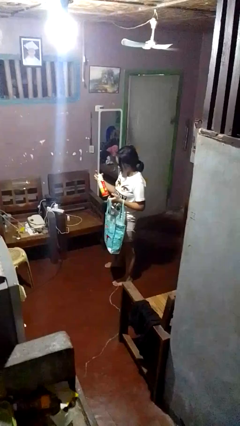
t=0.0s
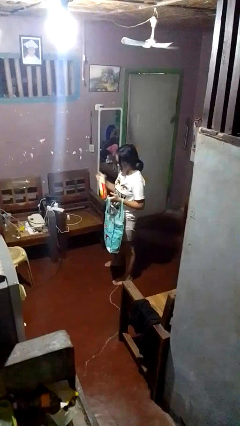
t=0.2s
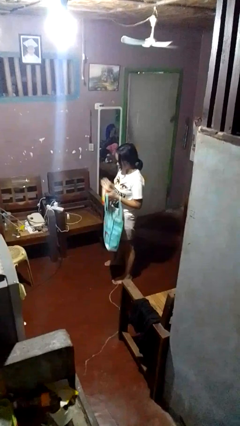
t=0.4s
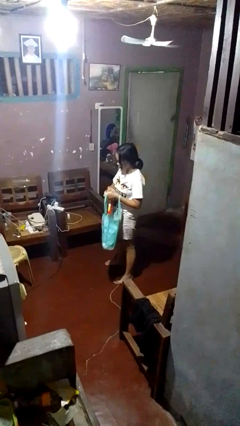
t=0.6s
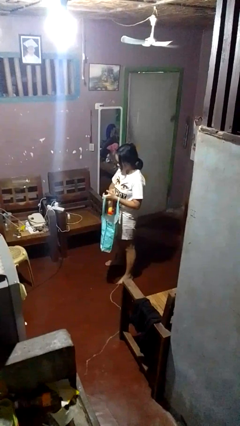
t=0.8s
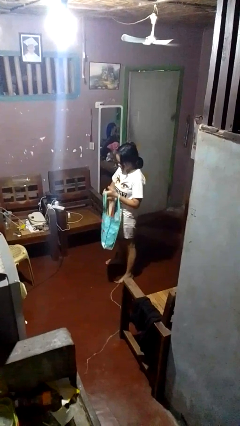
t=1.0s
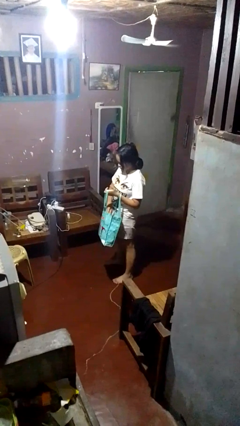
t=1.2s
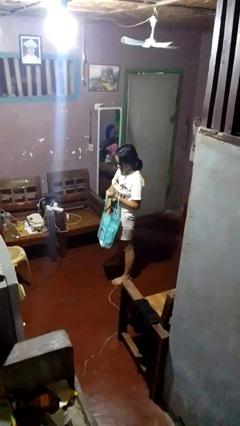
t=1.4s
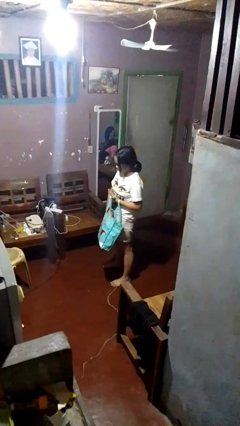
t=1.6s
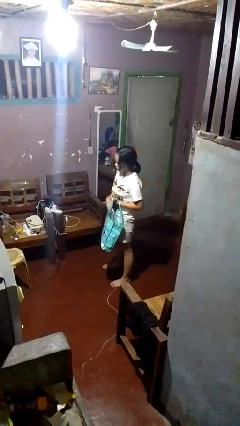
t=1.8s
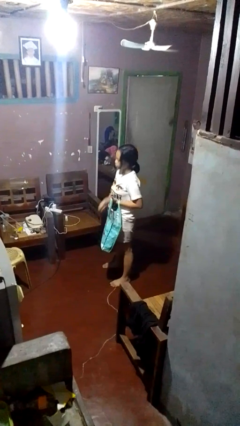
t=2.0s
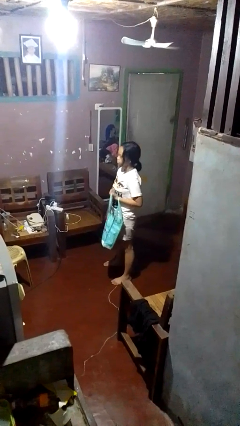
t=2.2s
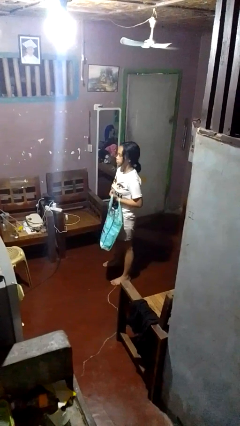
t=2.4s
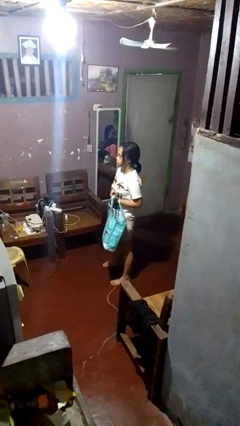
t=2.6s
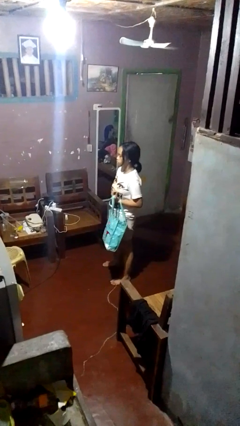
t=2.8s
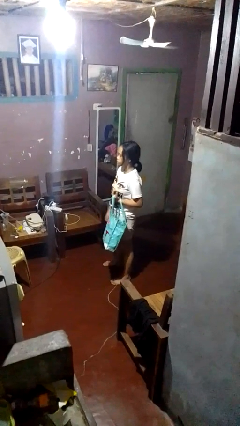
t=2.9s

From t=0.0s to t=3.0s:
person puts object into bag

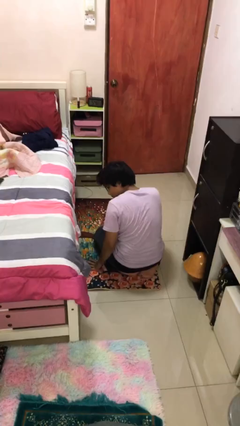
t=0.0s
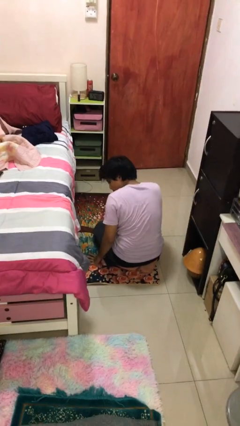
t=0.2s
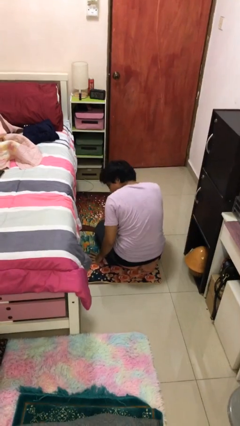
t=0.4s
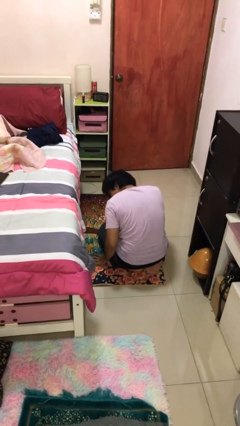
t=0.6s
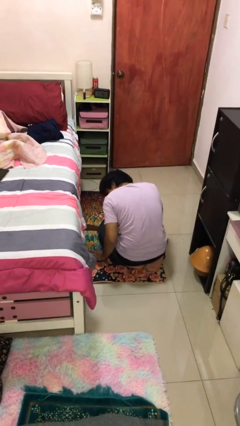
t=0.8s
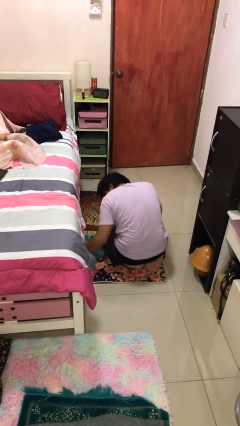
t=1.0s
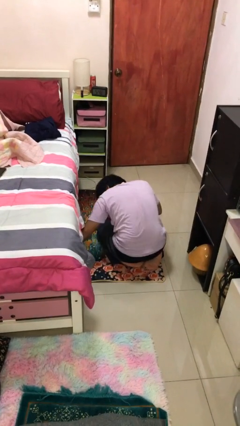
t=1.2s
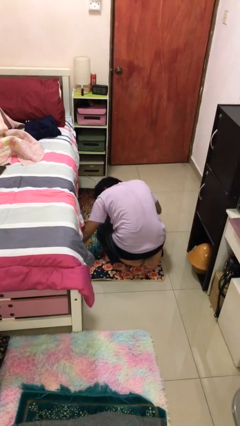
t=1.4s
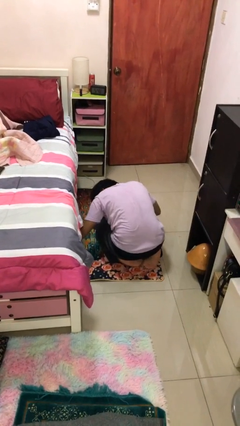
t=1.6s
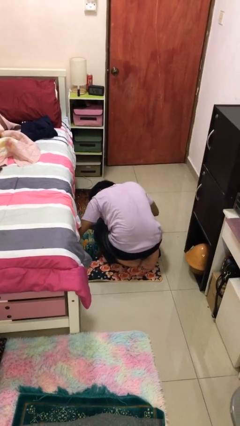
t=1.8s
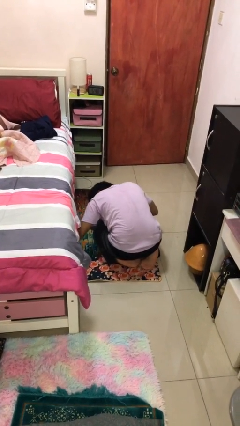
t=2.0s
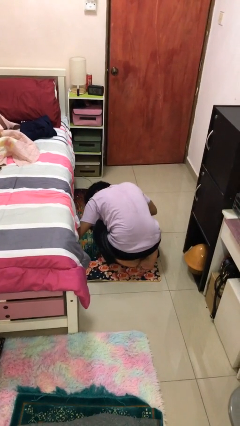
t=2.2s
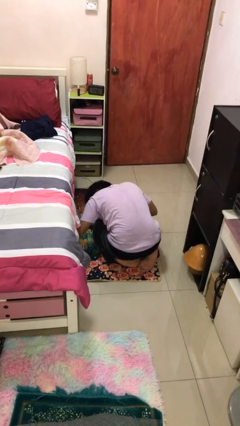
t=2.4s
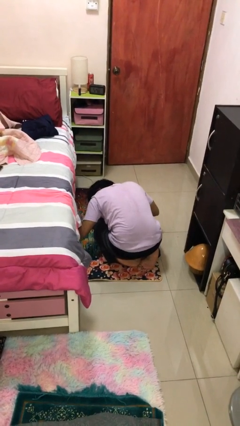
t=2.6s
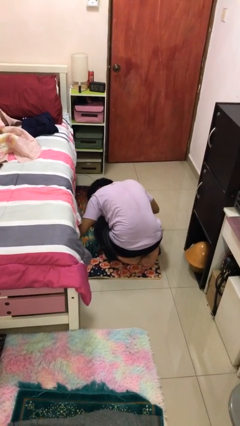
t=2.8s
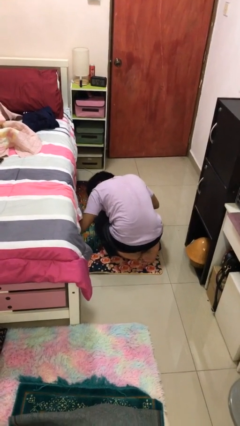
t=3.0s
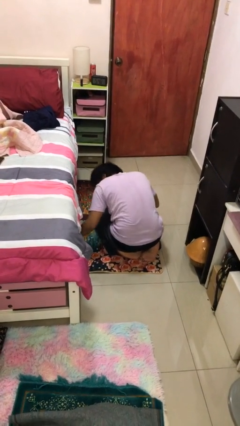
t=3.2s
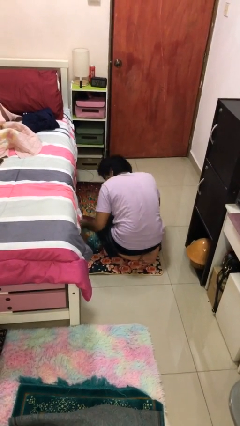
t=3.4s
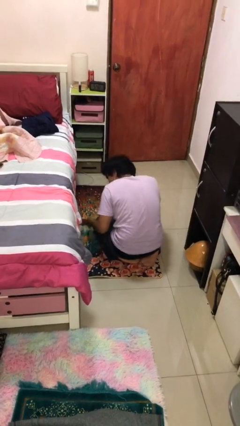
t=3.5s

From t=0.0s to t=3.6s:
person searches under bed

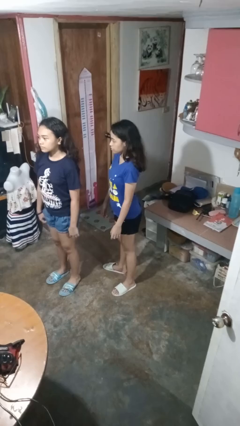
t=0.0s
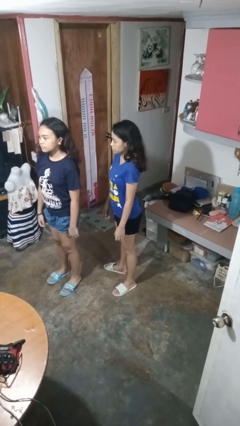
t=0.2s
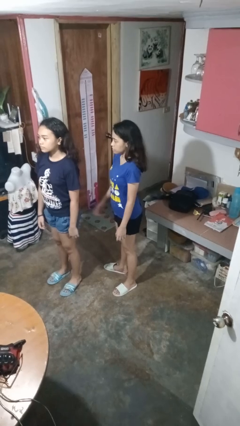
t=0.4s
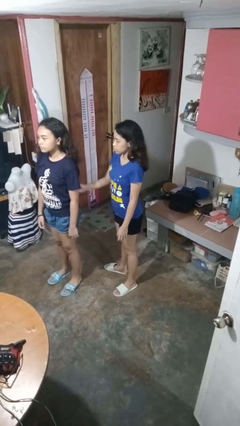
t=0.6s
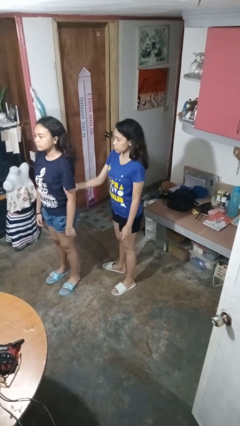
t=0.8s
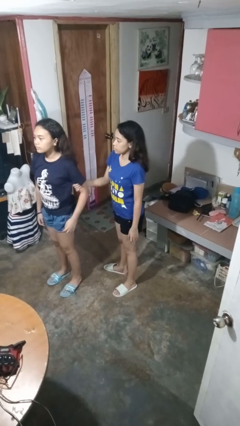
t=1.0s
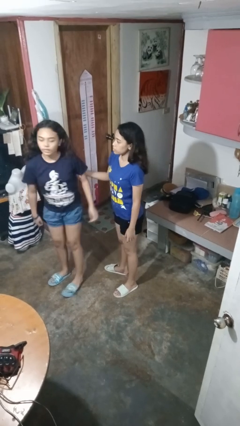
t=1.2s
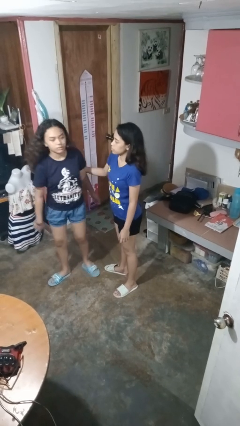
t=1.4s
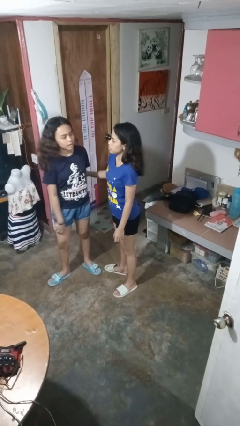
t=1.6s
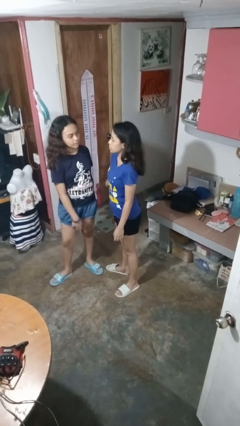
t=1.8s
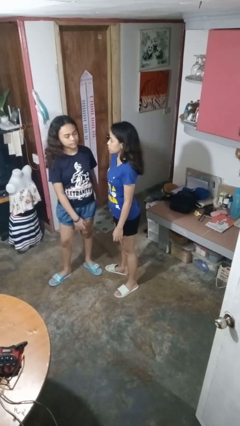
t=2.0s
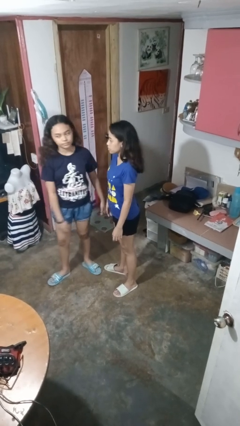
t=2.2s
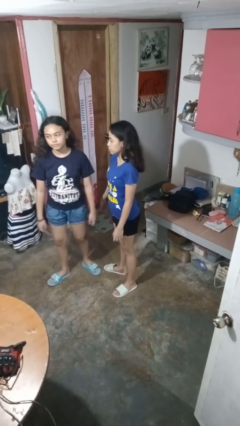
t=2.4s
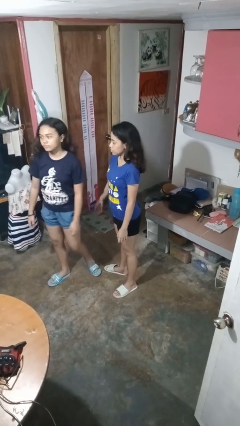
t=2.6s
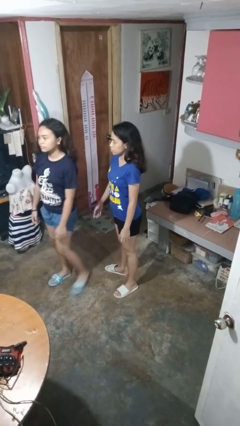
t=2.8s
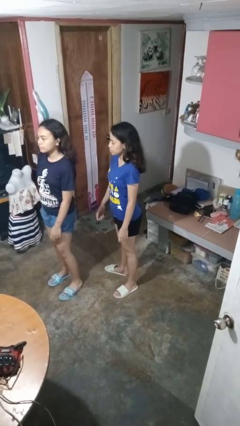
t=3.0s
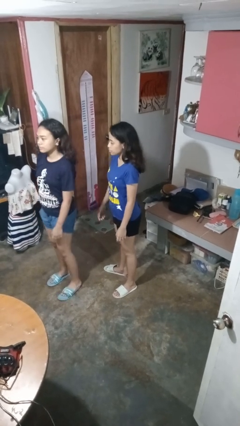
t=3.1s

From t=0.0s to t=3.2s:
person grabs person by bicep

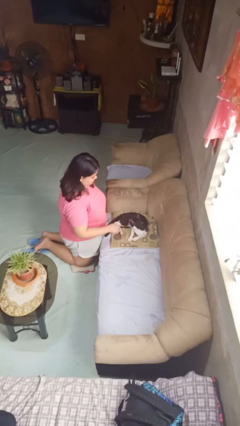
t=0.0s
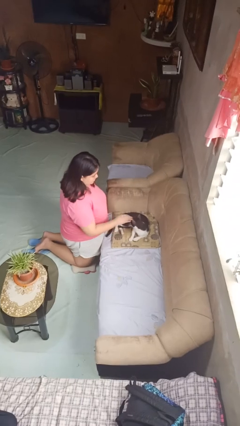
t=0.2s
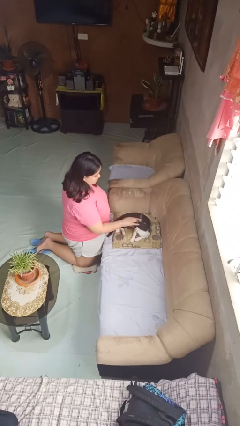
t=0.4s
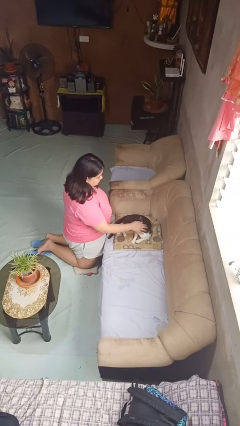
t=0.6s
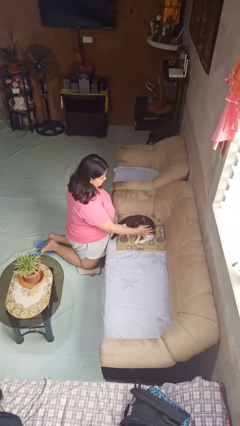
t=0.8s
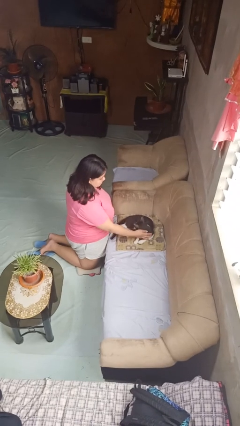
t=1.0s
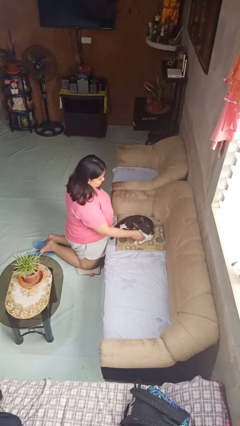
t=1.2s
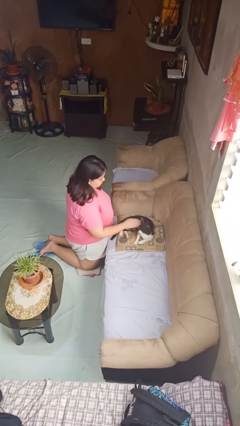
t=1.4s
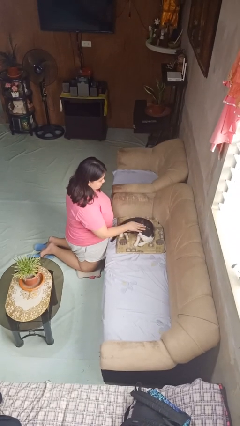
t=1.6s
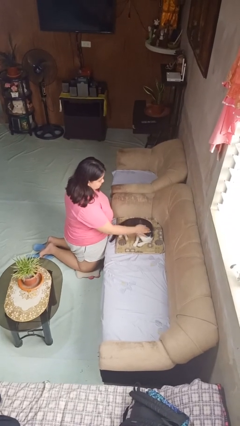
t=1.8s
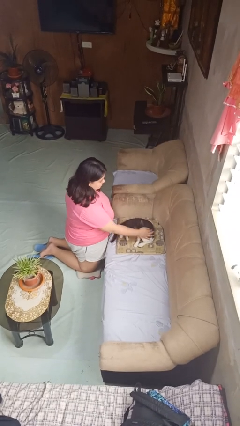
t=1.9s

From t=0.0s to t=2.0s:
person pets cat

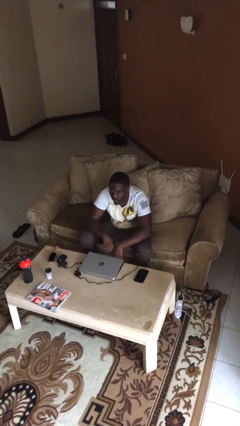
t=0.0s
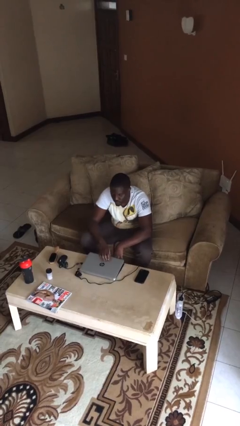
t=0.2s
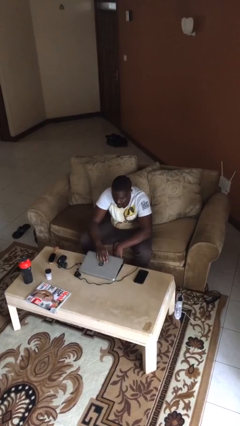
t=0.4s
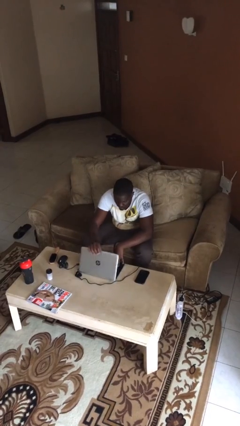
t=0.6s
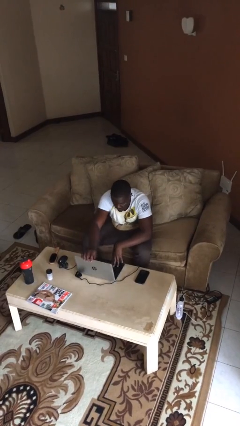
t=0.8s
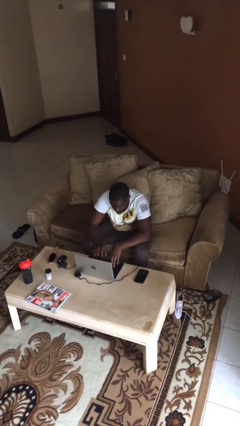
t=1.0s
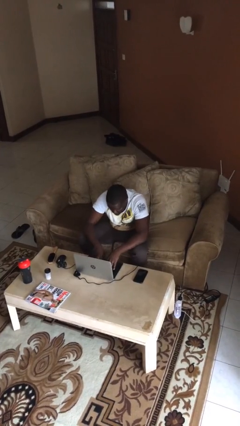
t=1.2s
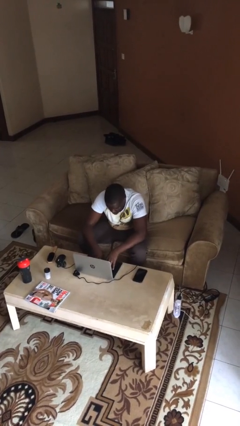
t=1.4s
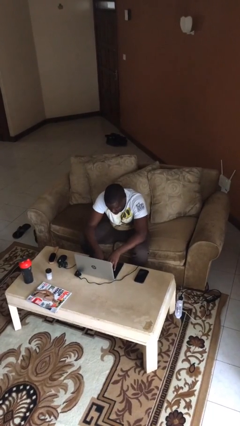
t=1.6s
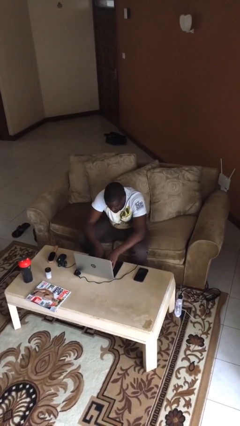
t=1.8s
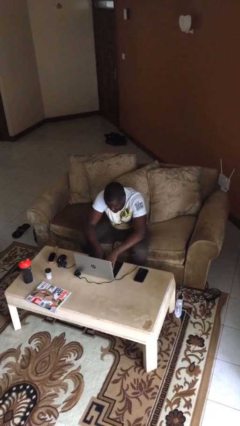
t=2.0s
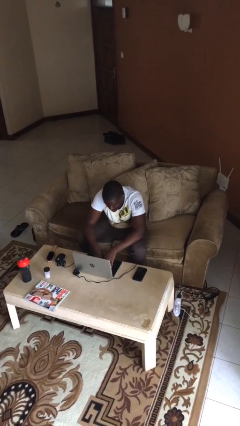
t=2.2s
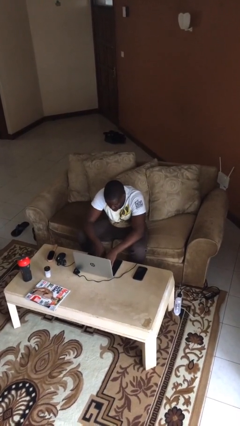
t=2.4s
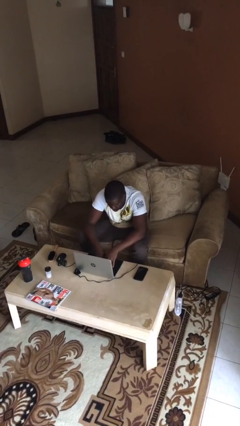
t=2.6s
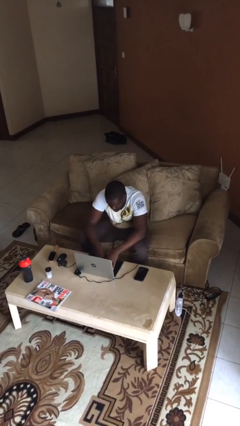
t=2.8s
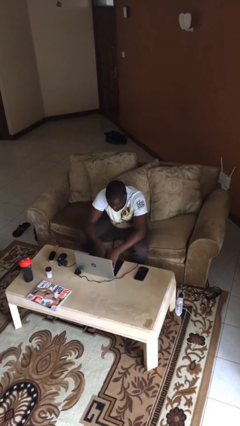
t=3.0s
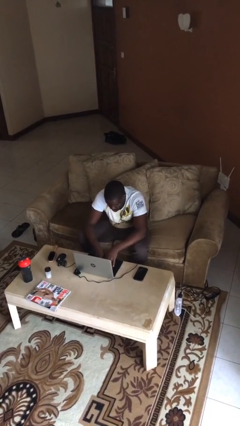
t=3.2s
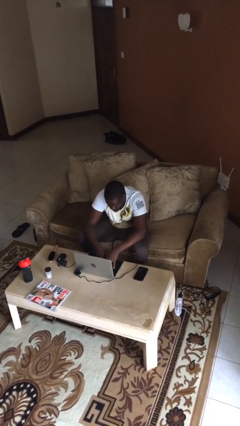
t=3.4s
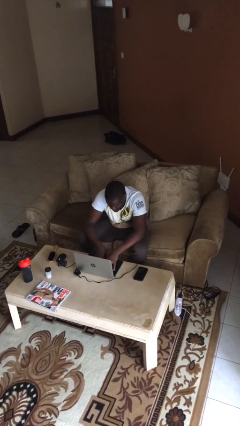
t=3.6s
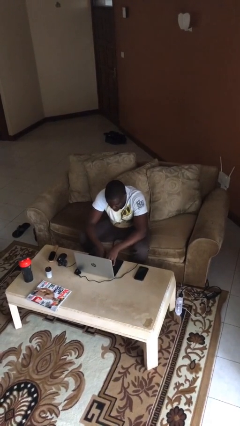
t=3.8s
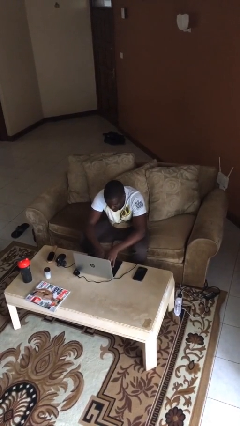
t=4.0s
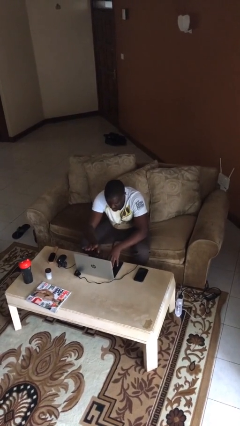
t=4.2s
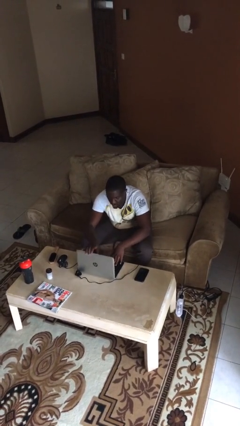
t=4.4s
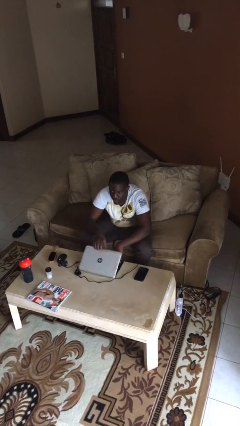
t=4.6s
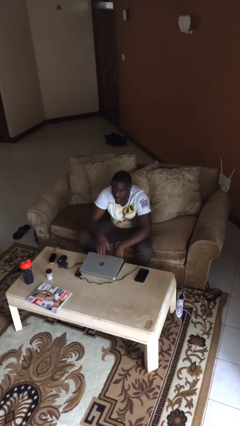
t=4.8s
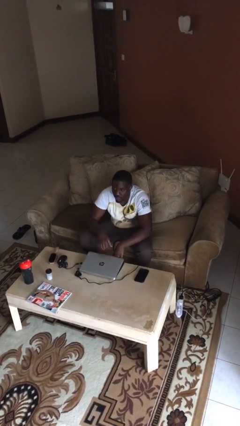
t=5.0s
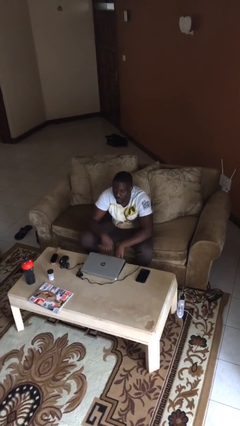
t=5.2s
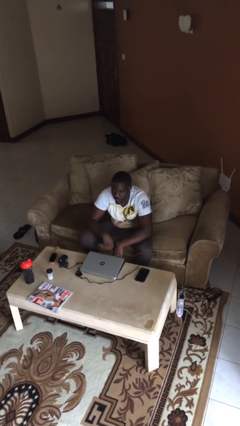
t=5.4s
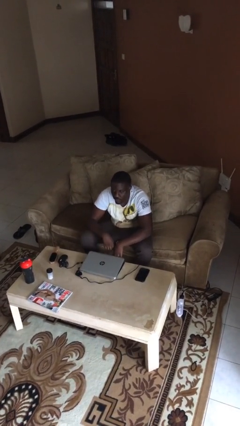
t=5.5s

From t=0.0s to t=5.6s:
person interacts with laptop

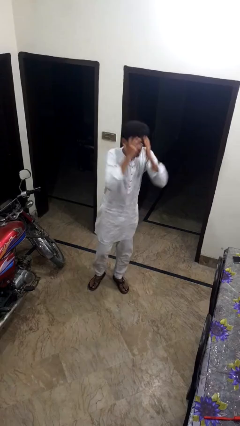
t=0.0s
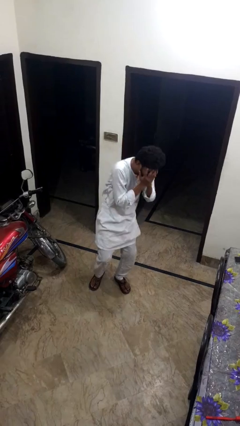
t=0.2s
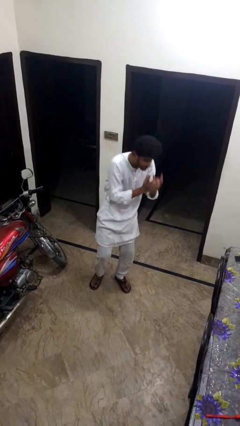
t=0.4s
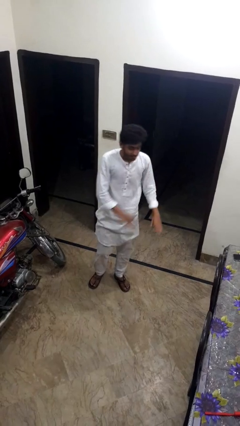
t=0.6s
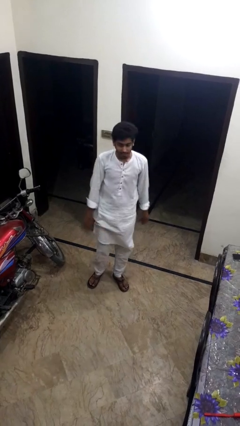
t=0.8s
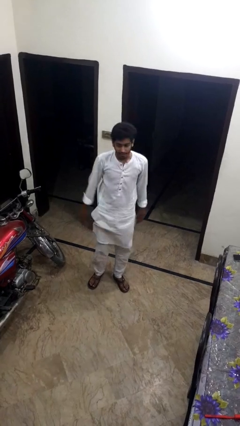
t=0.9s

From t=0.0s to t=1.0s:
person sneezes into hand
